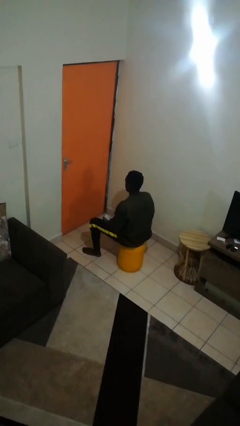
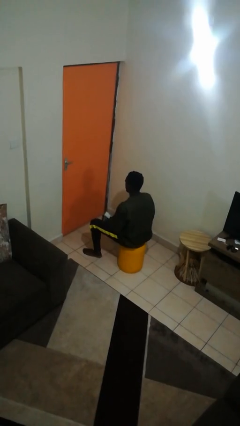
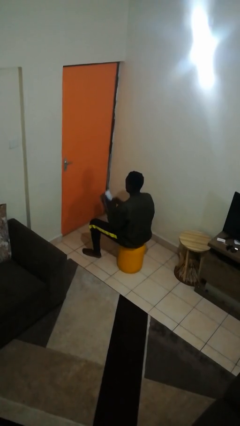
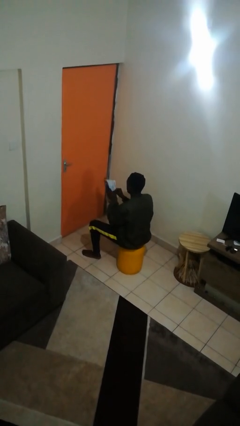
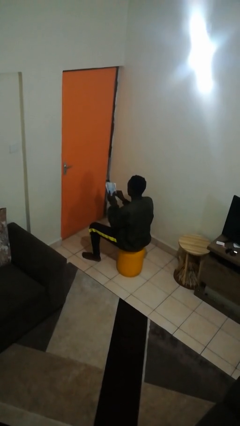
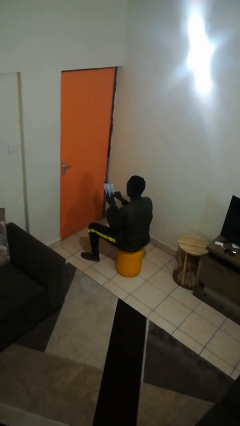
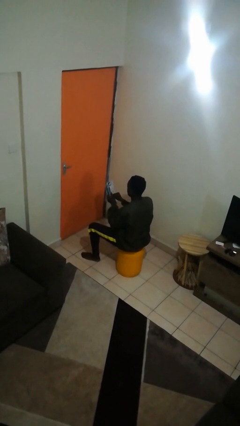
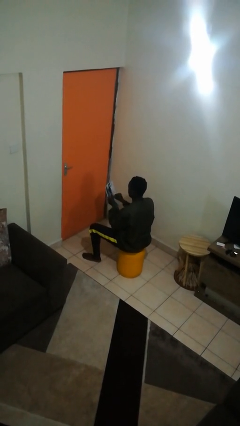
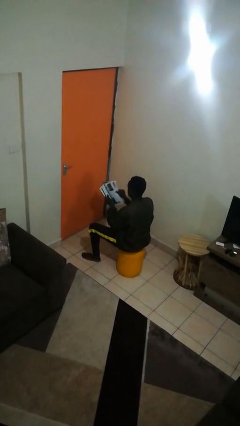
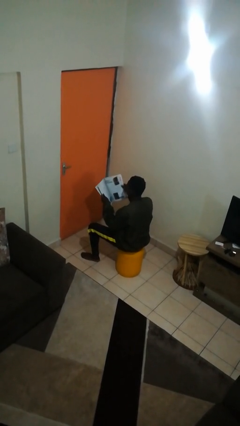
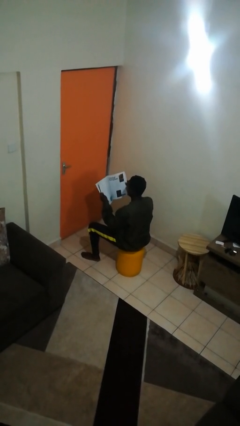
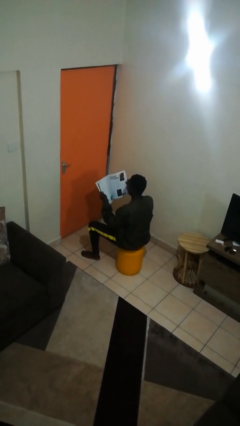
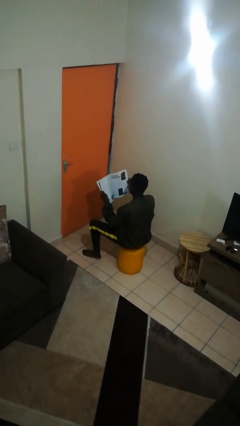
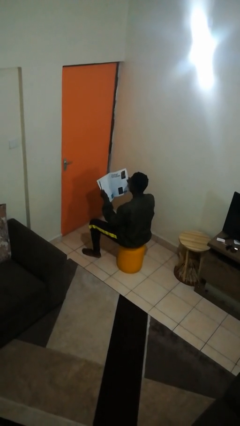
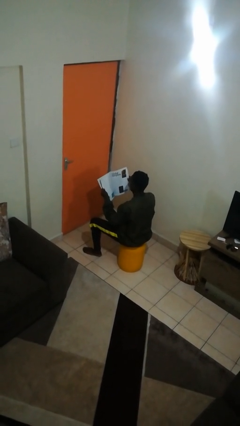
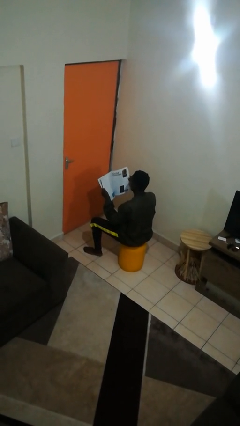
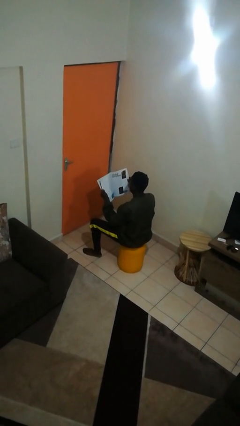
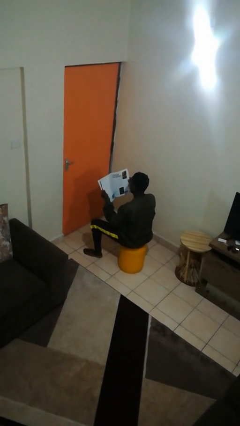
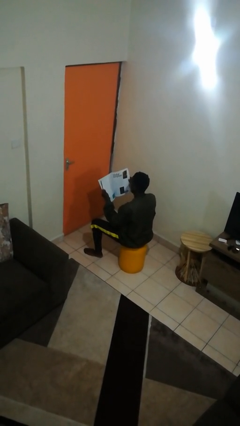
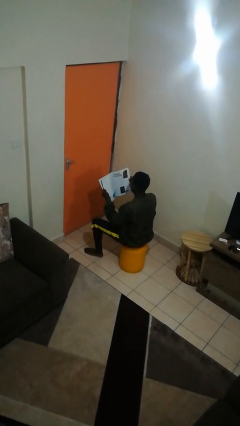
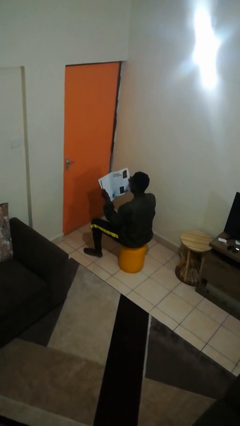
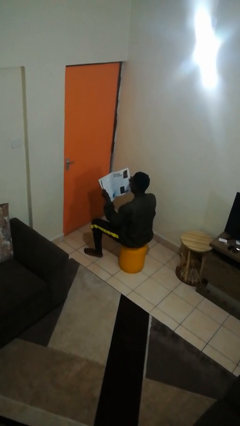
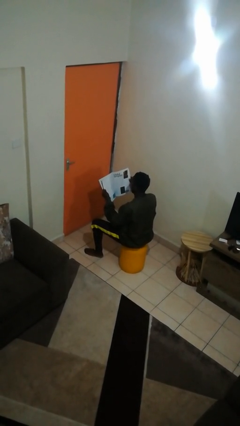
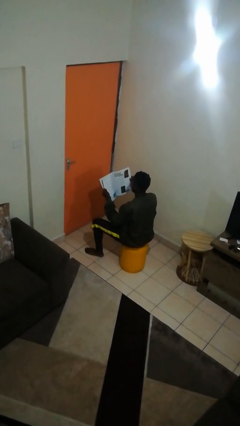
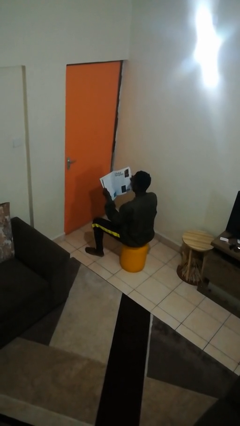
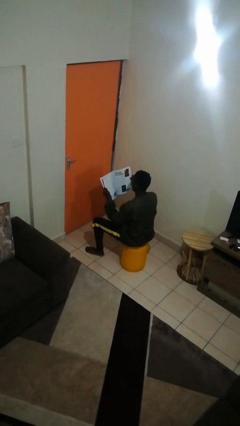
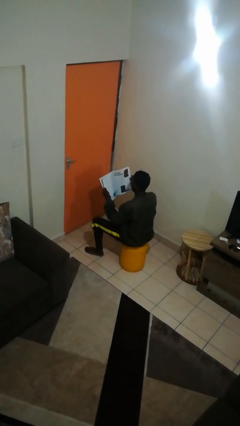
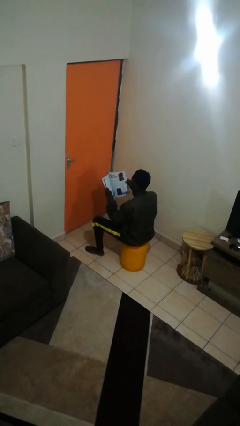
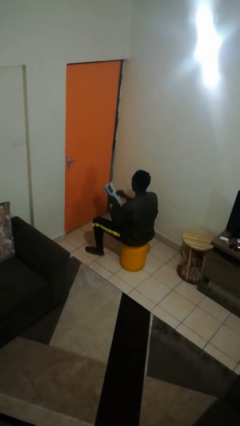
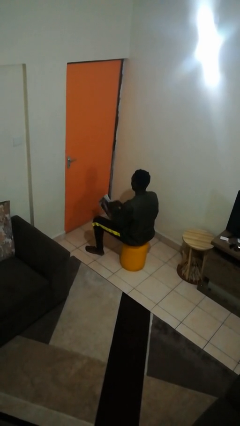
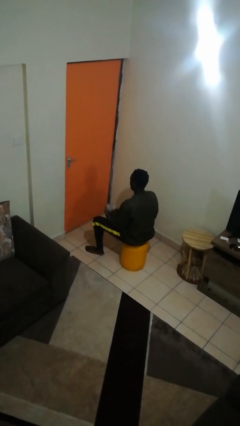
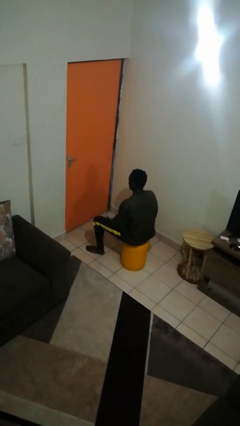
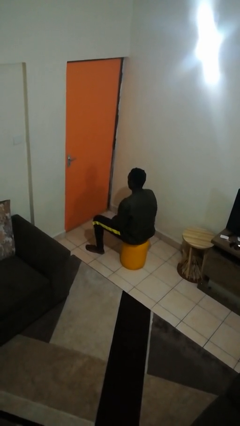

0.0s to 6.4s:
person reads magazine

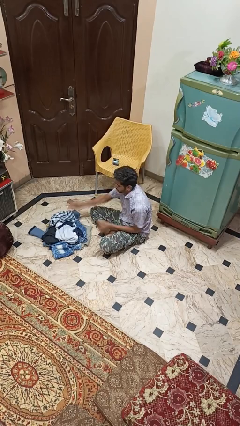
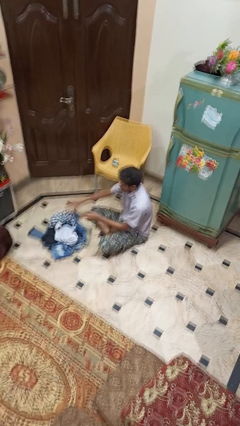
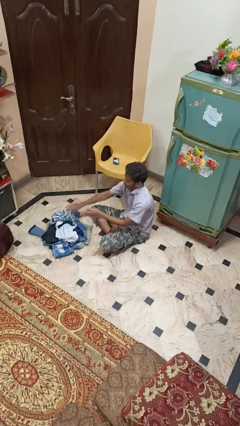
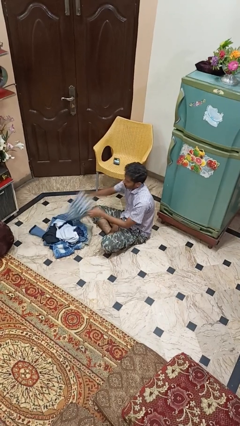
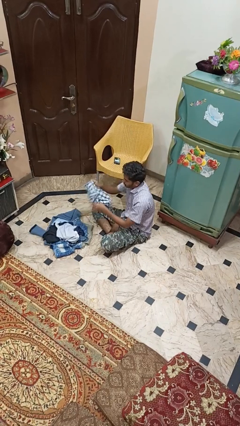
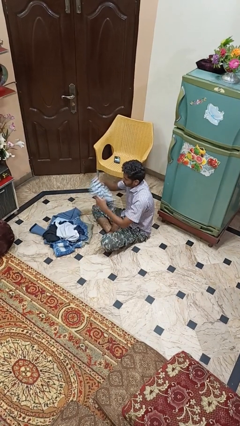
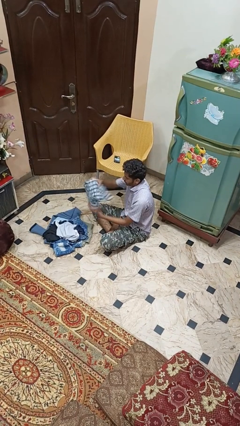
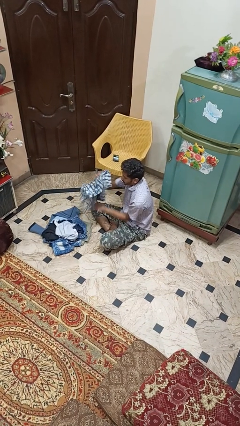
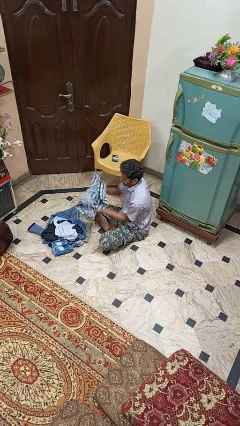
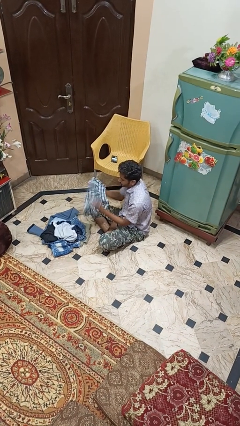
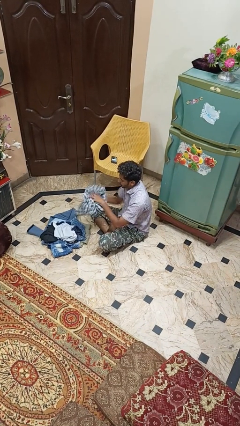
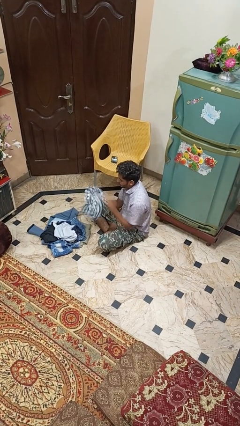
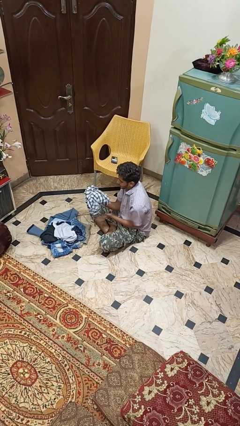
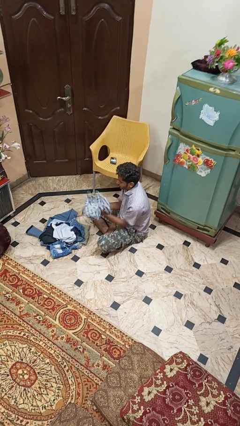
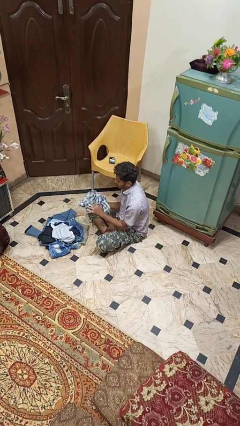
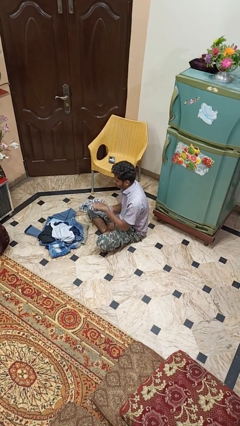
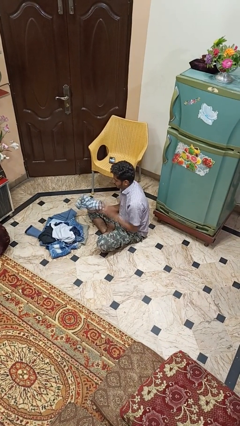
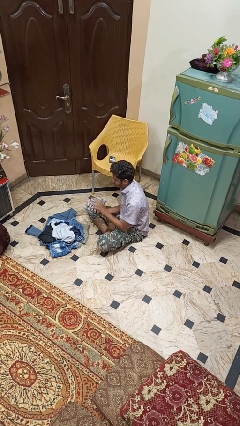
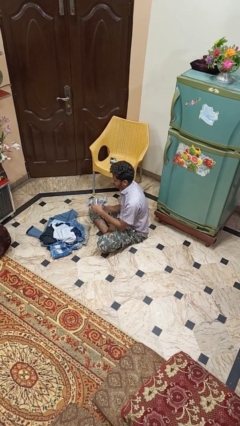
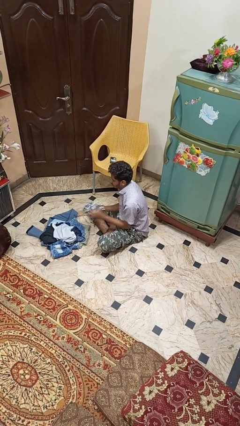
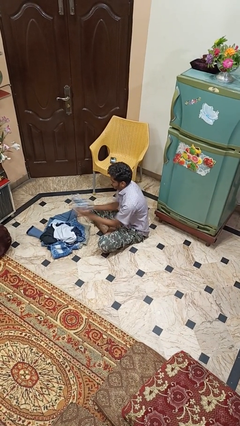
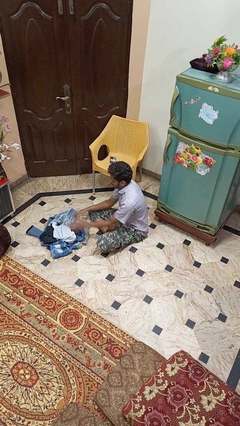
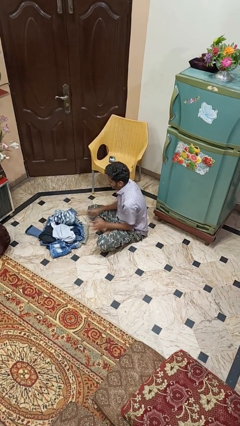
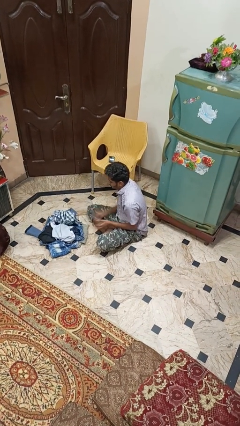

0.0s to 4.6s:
person folds shirt

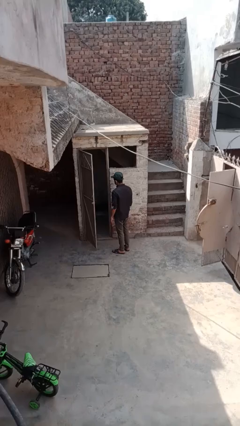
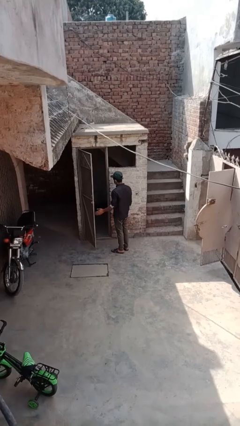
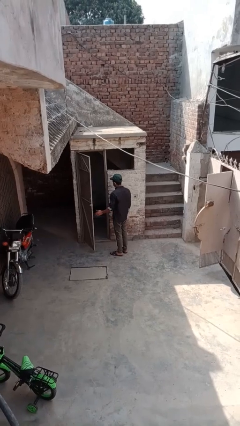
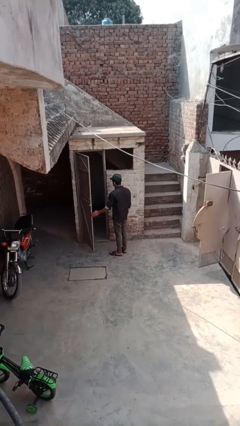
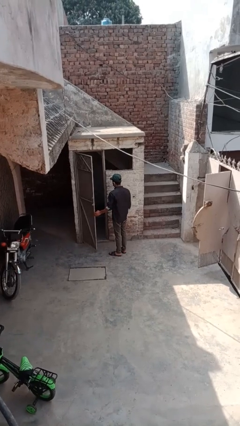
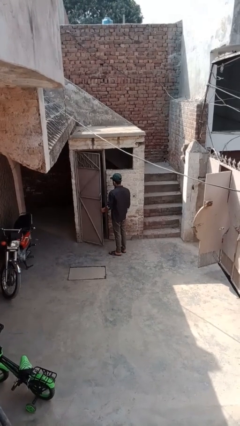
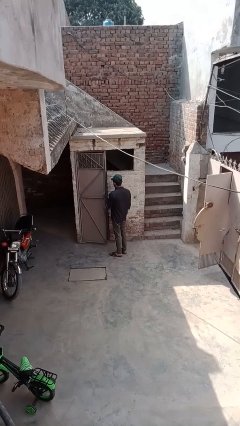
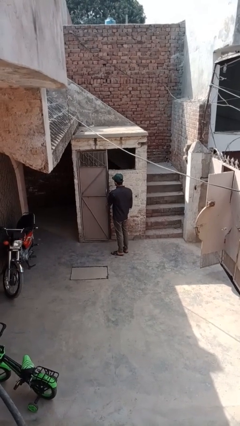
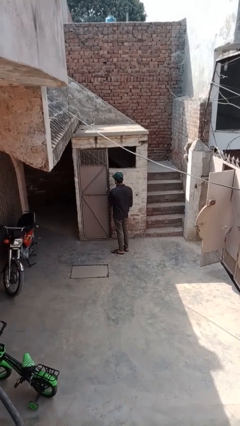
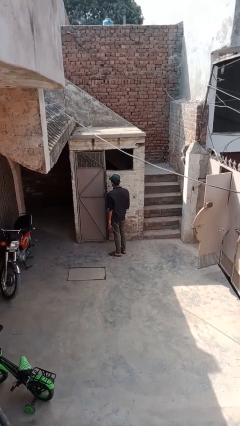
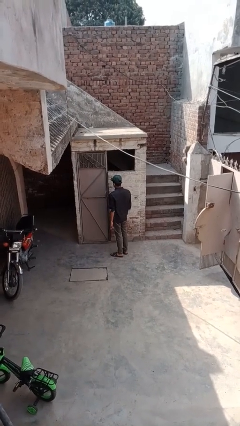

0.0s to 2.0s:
person closes facility door

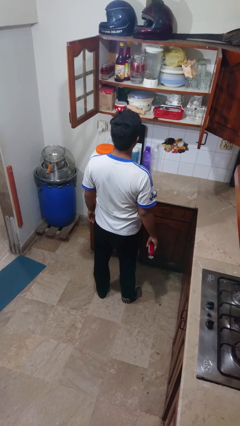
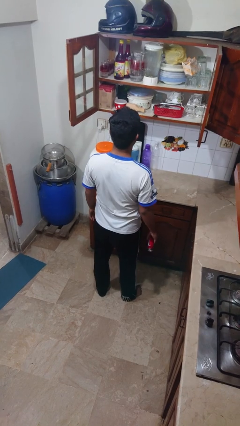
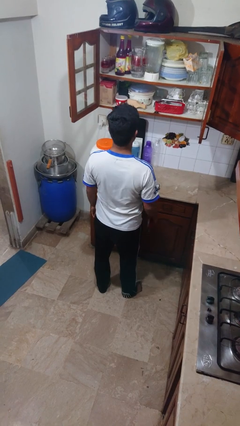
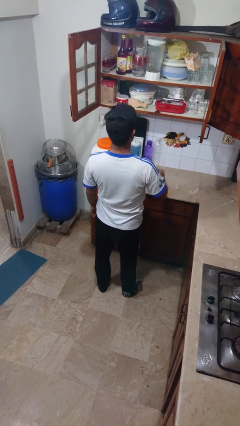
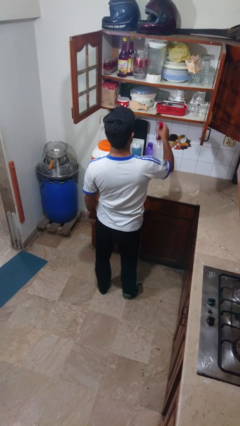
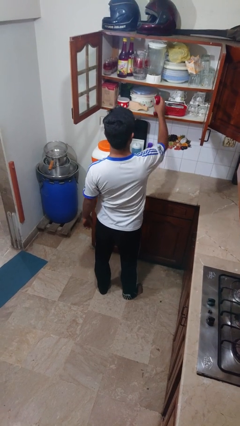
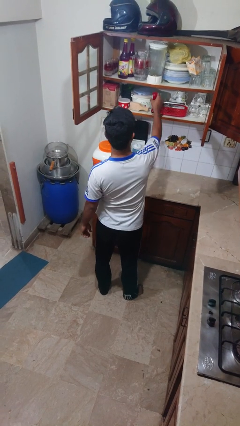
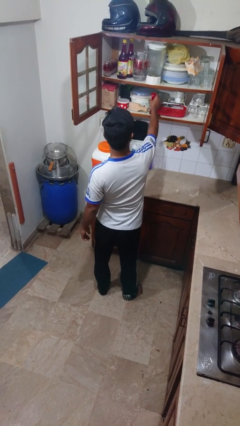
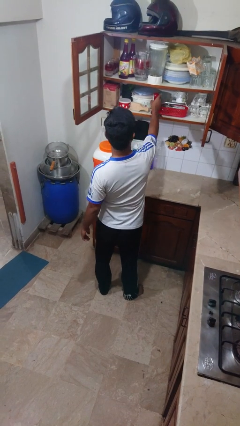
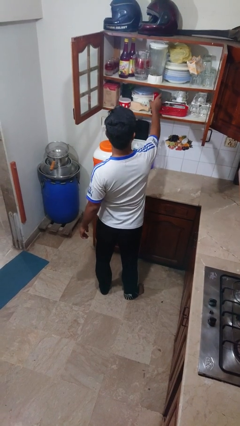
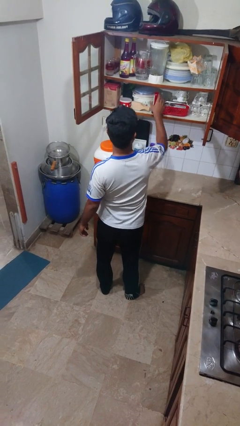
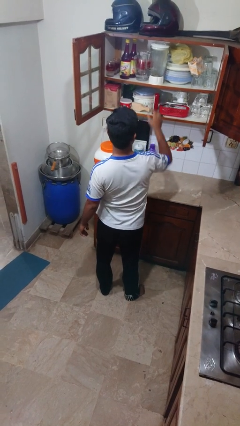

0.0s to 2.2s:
person puts down object into cabinet

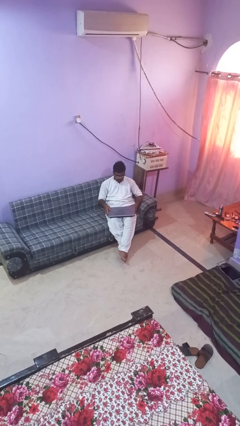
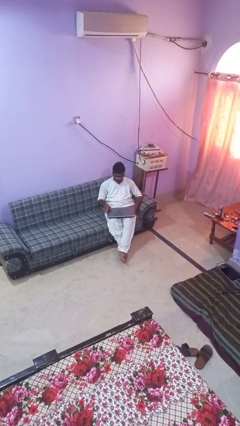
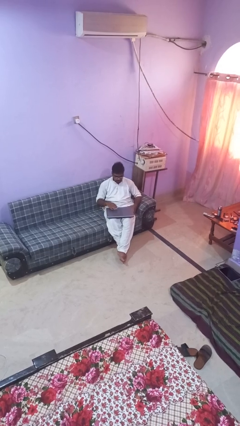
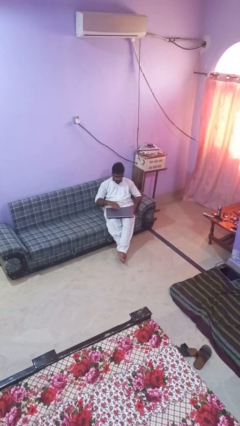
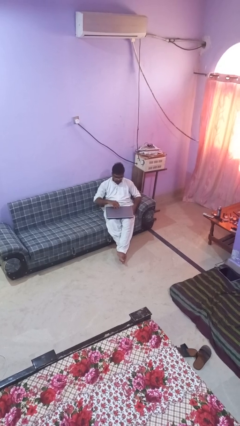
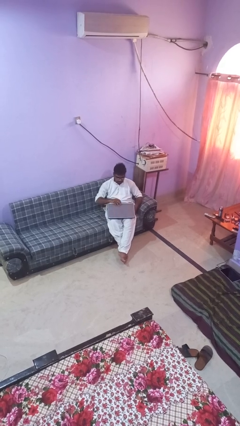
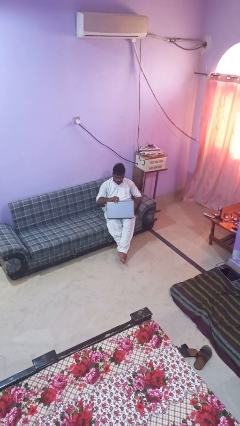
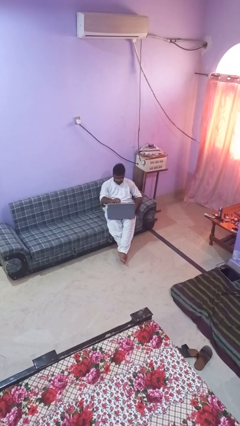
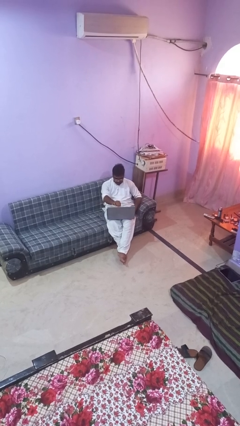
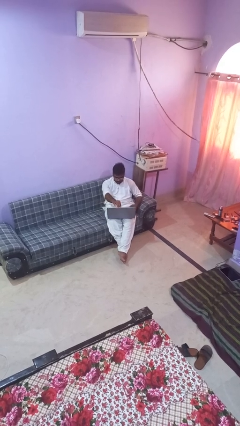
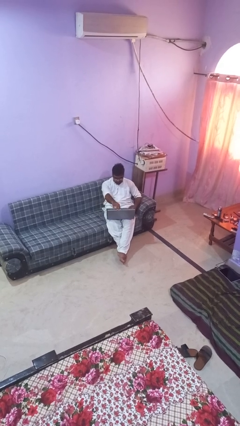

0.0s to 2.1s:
person opens laptop

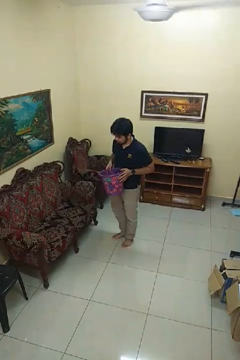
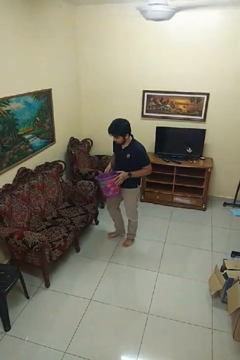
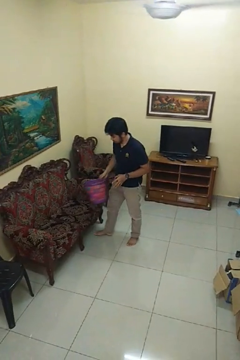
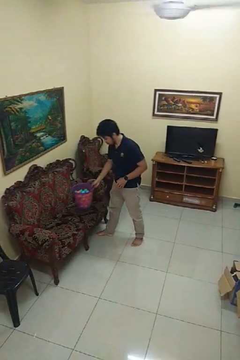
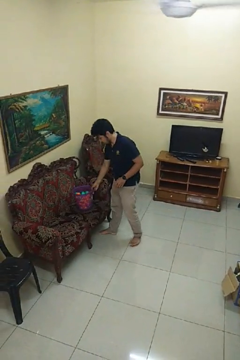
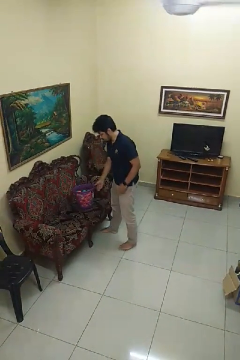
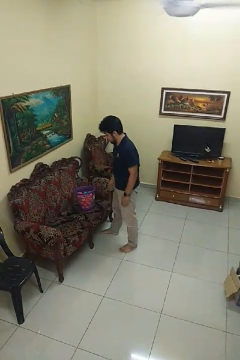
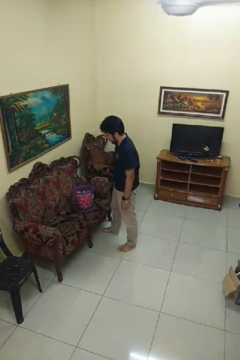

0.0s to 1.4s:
person puts down object on couch
